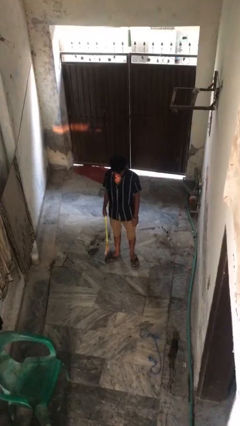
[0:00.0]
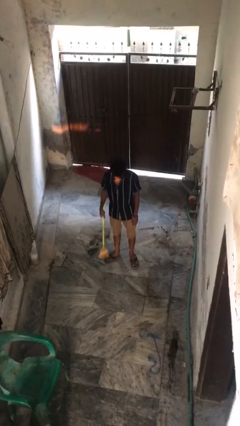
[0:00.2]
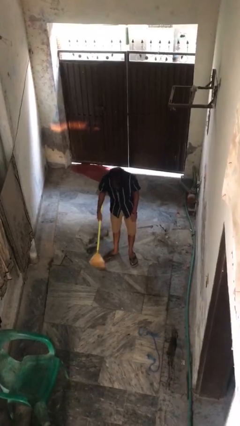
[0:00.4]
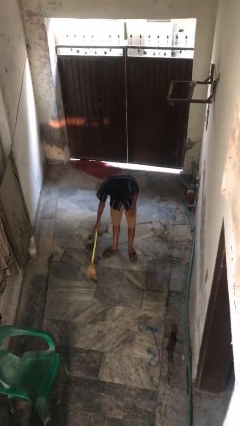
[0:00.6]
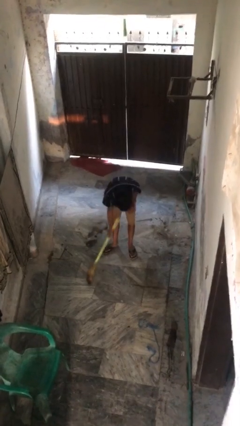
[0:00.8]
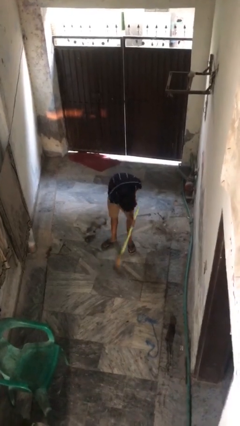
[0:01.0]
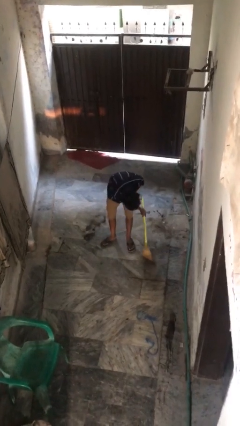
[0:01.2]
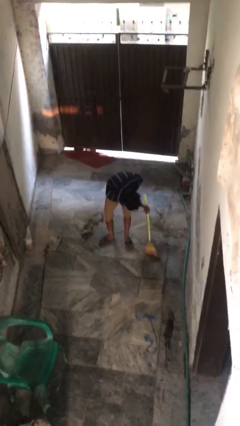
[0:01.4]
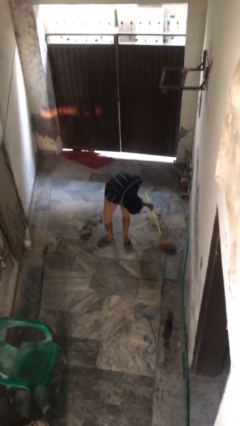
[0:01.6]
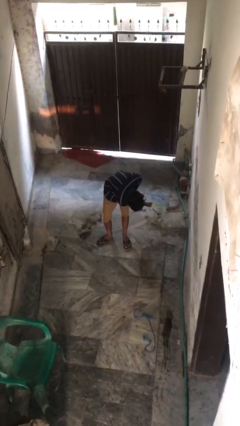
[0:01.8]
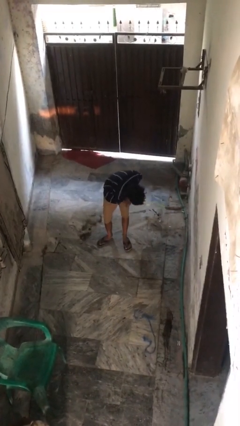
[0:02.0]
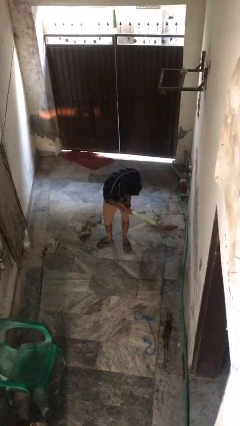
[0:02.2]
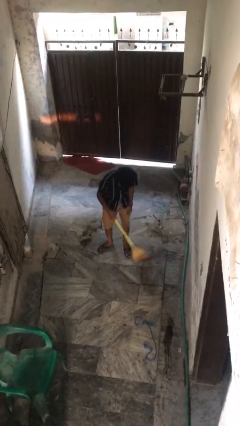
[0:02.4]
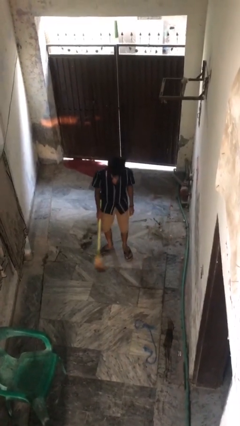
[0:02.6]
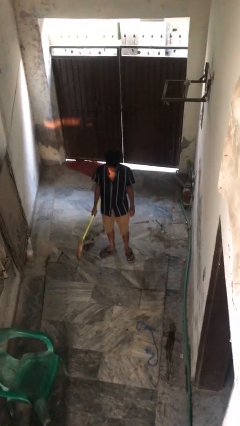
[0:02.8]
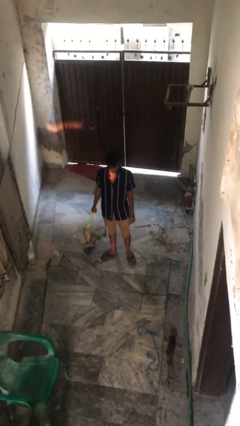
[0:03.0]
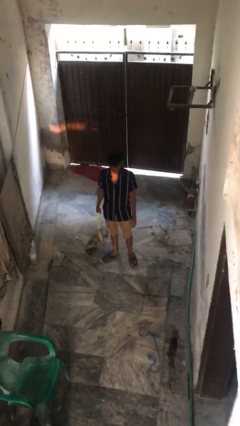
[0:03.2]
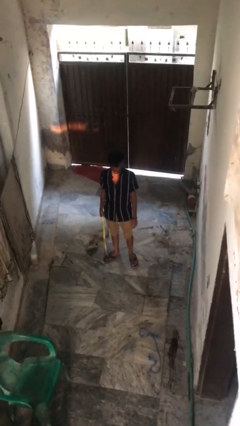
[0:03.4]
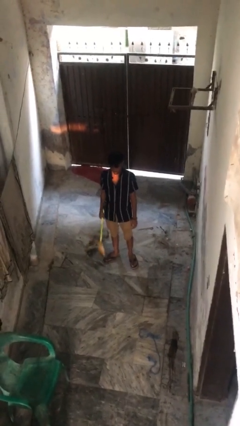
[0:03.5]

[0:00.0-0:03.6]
person sweeps floor

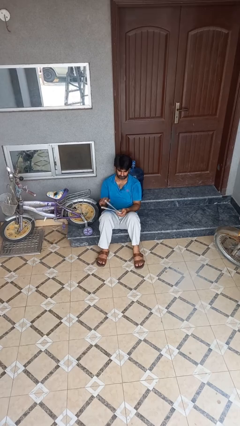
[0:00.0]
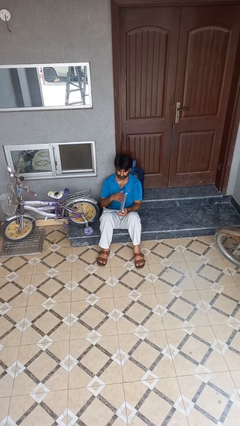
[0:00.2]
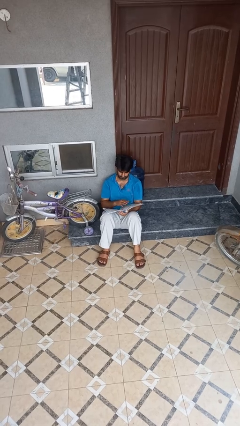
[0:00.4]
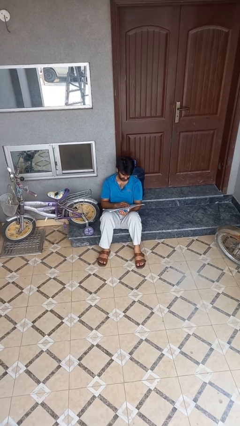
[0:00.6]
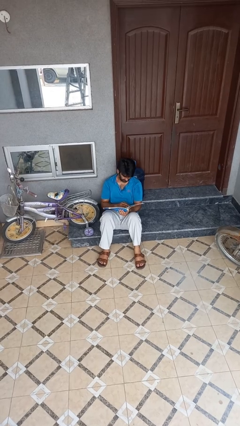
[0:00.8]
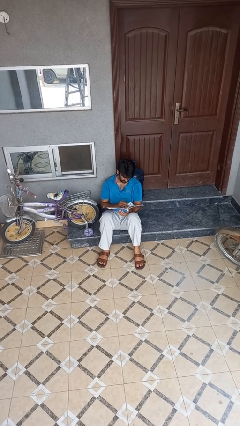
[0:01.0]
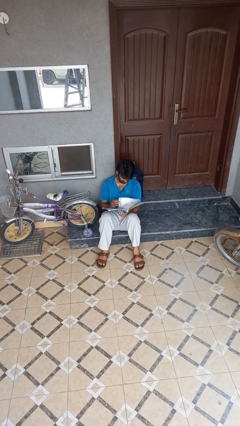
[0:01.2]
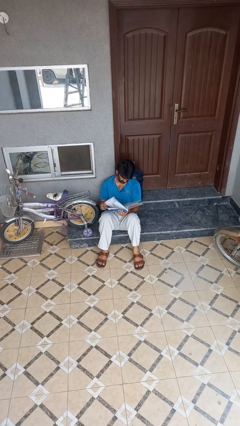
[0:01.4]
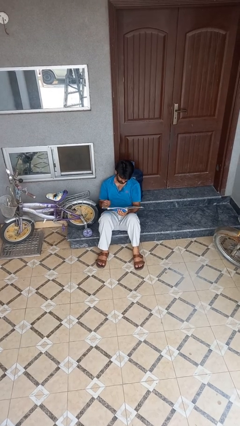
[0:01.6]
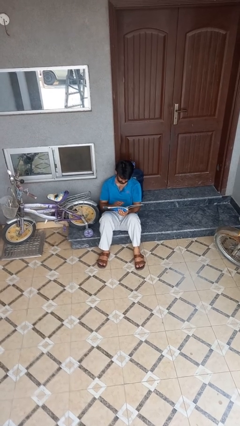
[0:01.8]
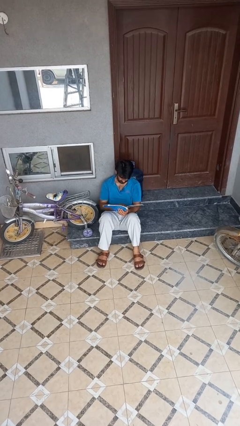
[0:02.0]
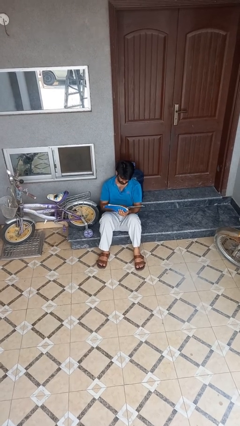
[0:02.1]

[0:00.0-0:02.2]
person reads book

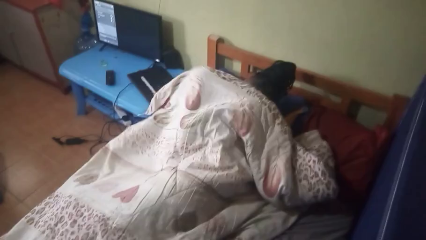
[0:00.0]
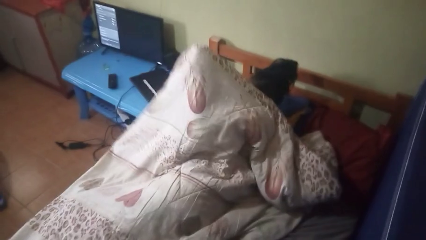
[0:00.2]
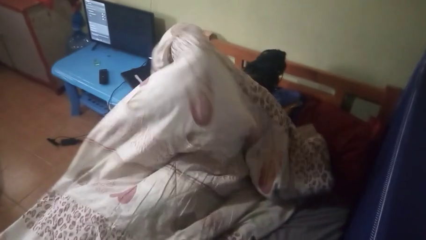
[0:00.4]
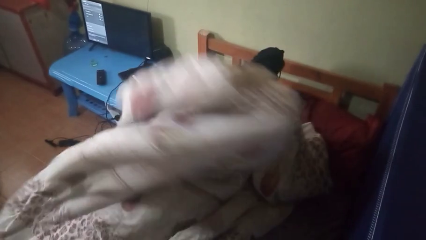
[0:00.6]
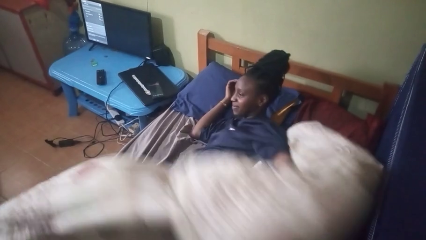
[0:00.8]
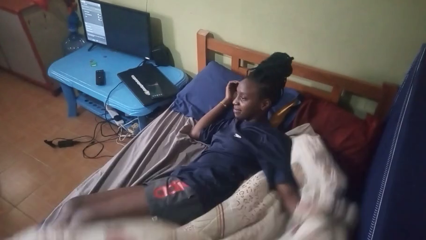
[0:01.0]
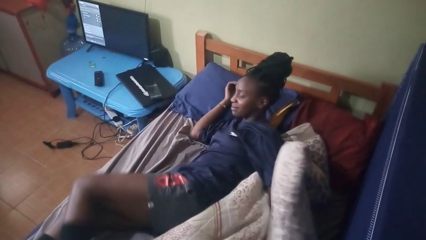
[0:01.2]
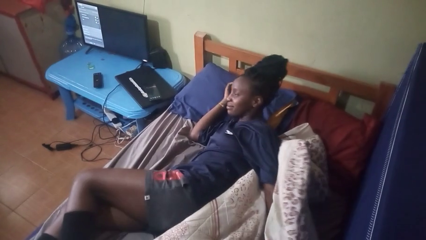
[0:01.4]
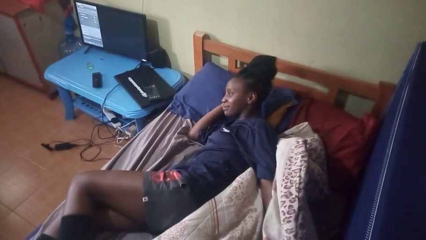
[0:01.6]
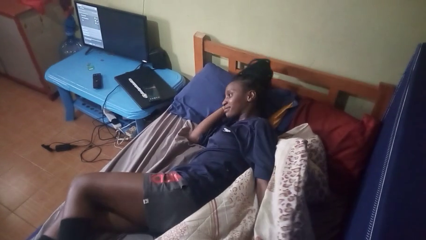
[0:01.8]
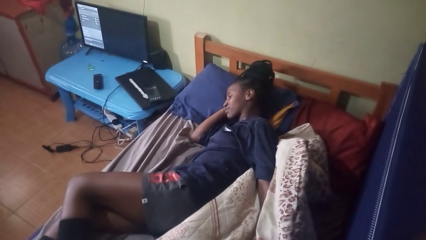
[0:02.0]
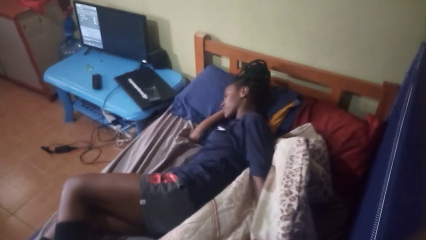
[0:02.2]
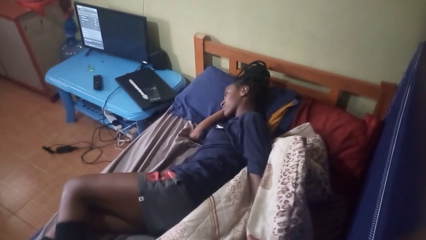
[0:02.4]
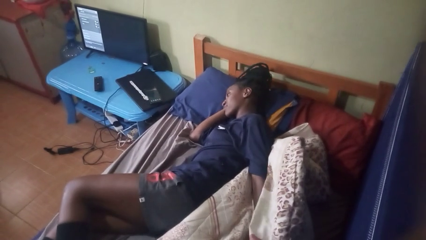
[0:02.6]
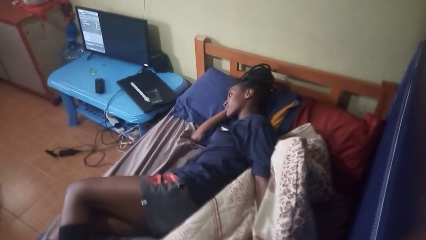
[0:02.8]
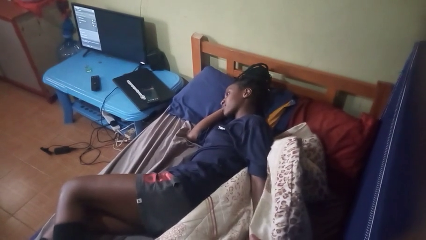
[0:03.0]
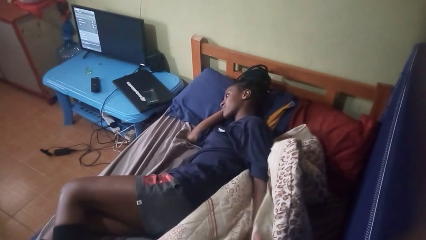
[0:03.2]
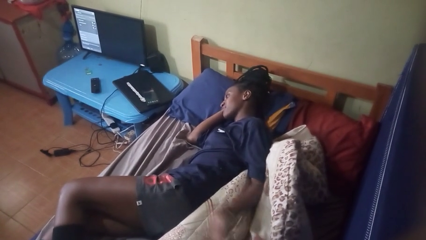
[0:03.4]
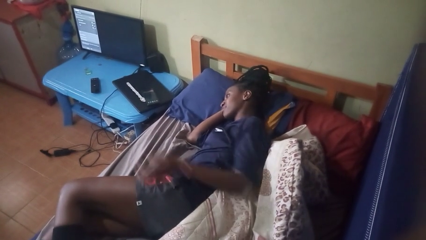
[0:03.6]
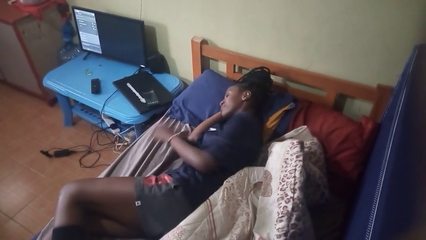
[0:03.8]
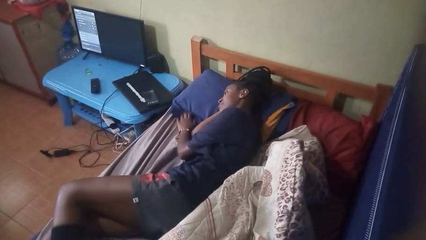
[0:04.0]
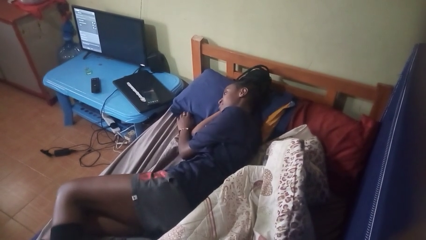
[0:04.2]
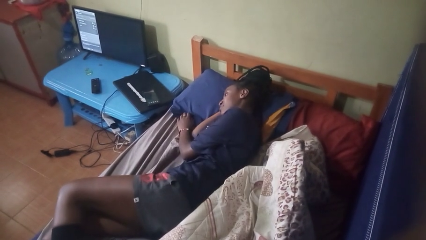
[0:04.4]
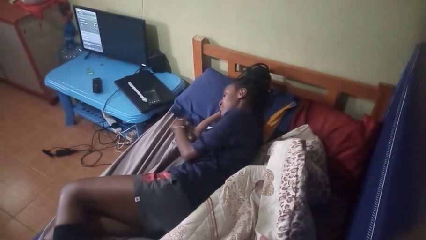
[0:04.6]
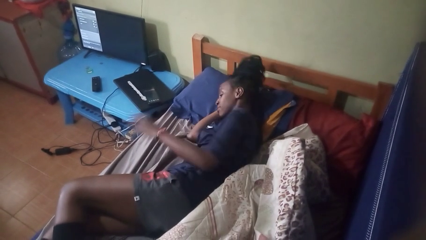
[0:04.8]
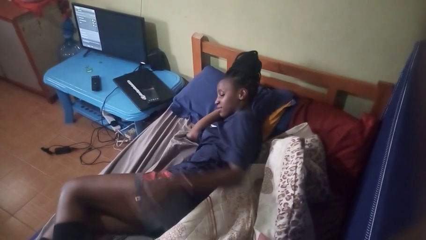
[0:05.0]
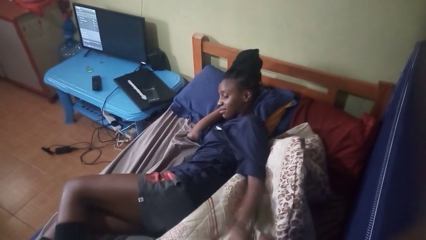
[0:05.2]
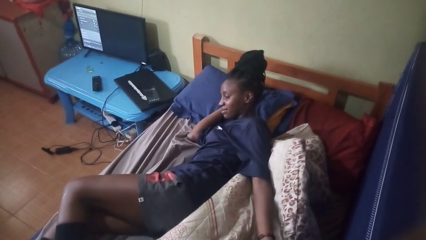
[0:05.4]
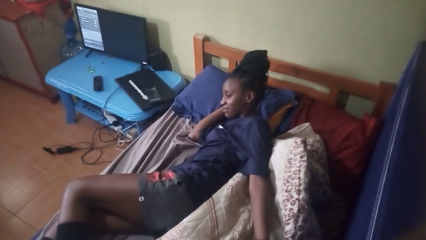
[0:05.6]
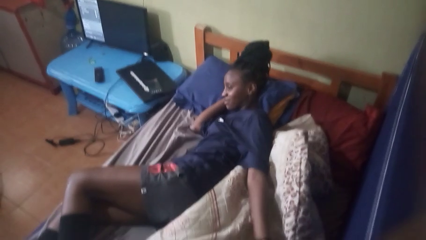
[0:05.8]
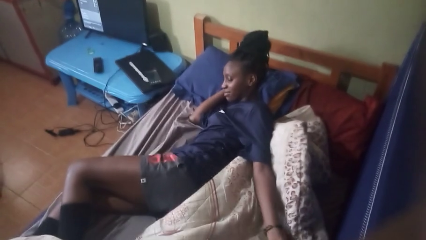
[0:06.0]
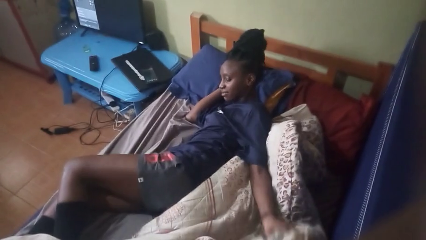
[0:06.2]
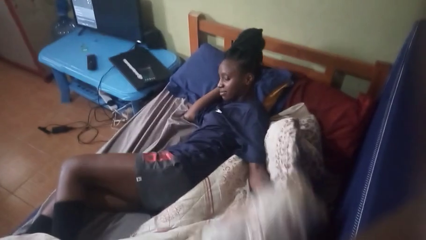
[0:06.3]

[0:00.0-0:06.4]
person uncovers with blanket

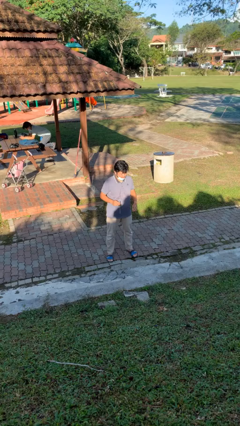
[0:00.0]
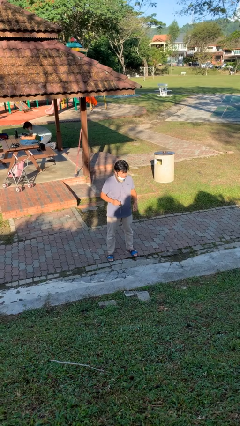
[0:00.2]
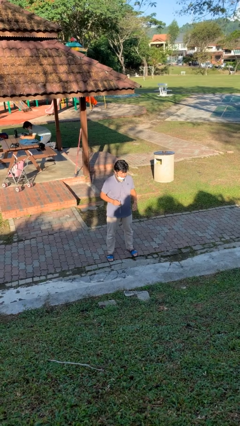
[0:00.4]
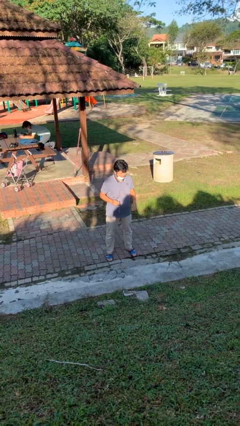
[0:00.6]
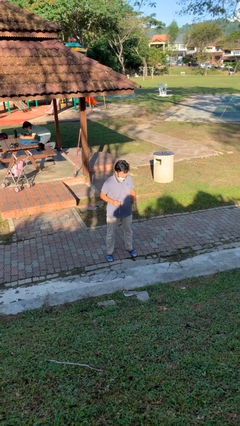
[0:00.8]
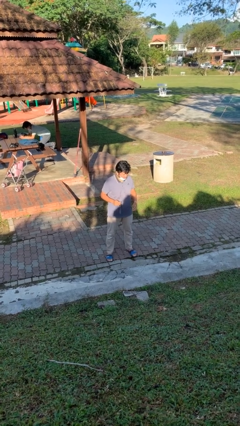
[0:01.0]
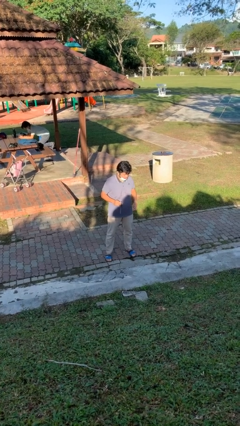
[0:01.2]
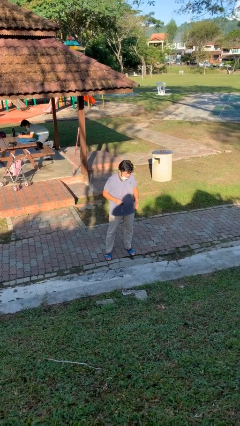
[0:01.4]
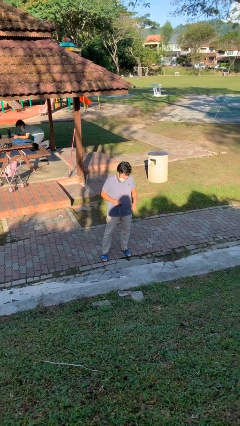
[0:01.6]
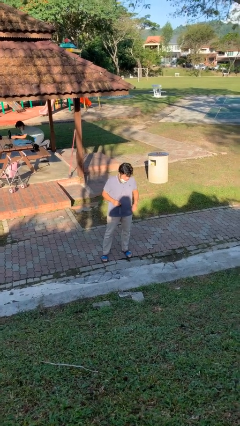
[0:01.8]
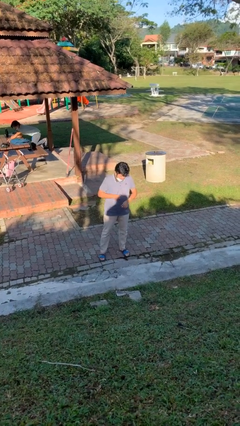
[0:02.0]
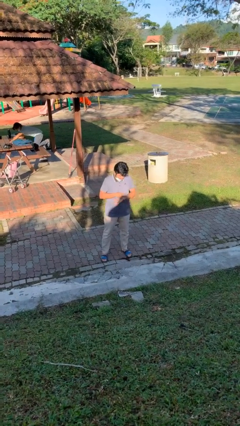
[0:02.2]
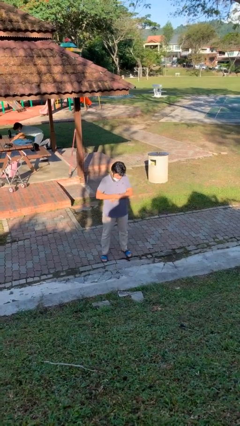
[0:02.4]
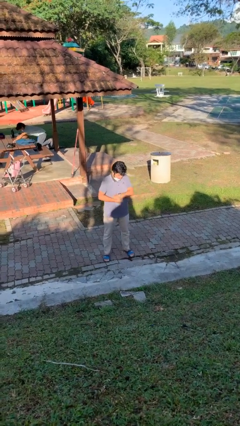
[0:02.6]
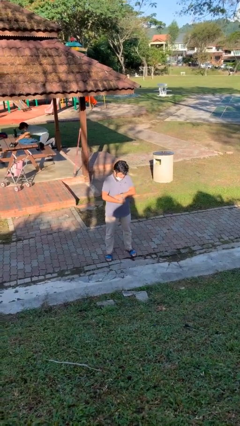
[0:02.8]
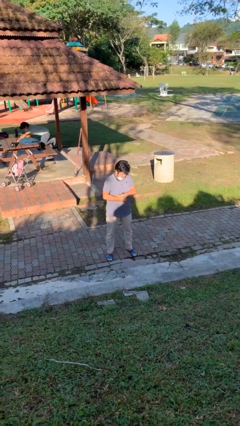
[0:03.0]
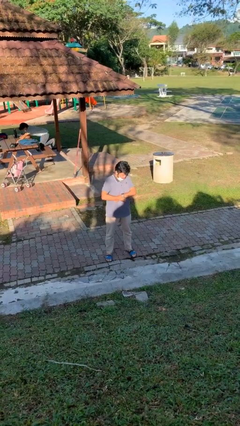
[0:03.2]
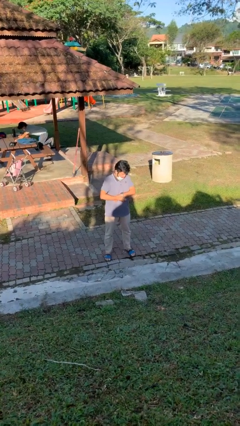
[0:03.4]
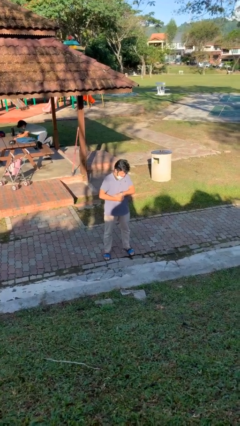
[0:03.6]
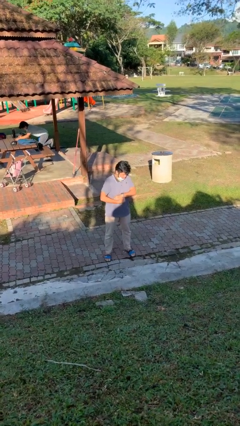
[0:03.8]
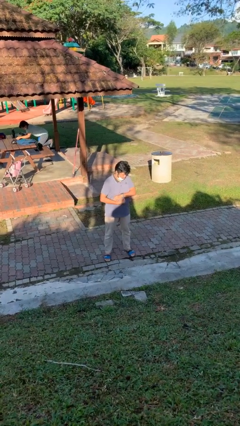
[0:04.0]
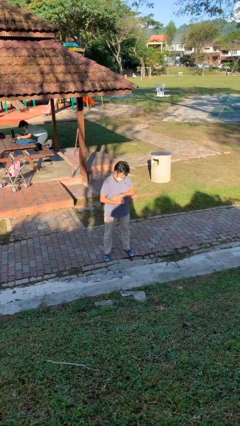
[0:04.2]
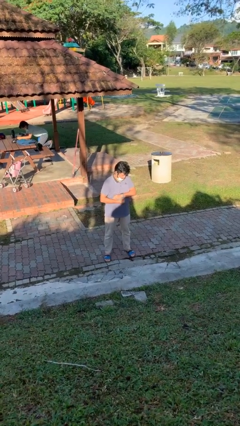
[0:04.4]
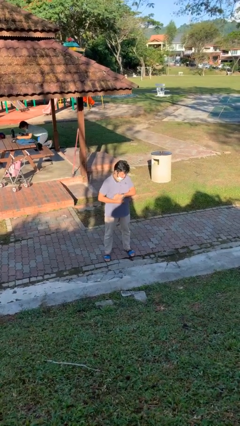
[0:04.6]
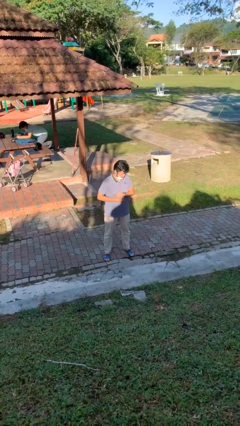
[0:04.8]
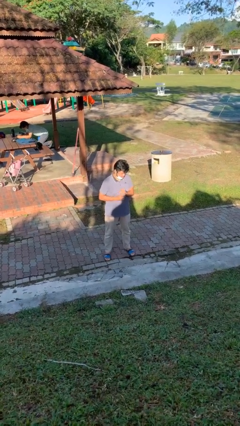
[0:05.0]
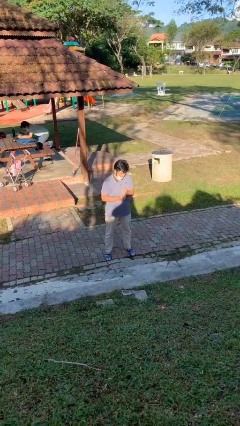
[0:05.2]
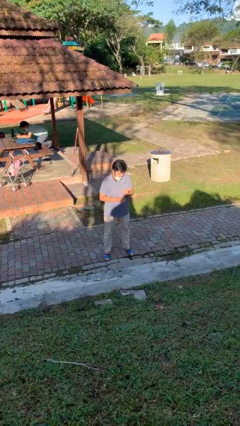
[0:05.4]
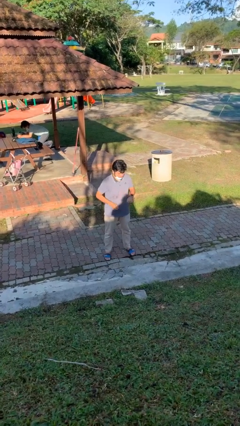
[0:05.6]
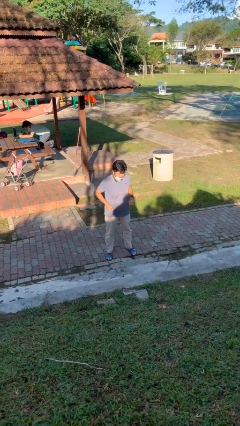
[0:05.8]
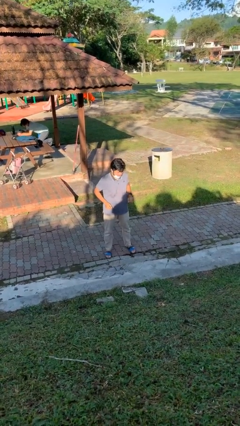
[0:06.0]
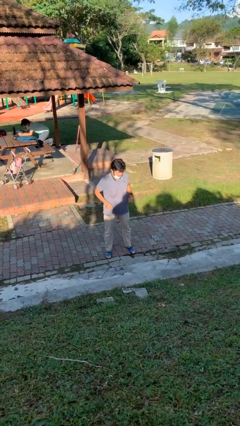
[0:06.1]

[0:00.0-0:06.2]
person puts on wristwatch
